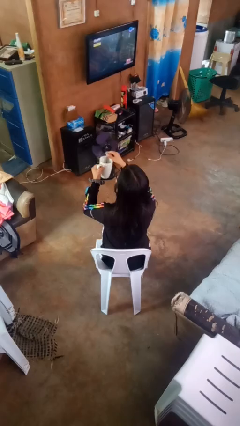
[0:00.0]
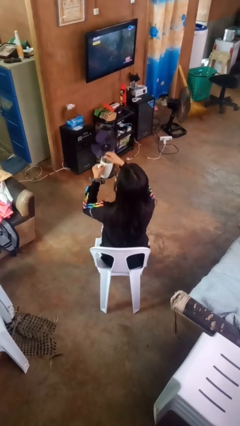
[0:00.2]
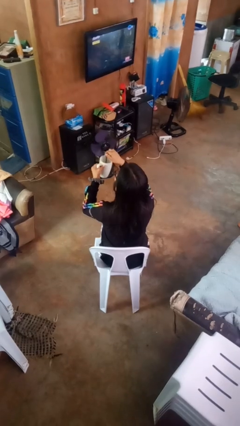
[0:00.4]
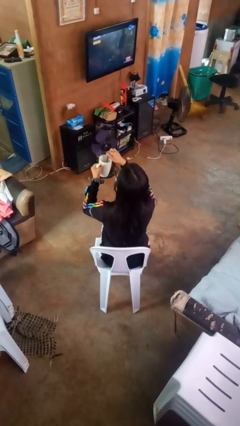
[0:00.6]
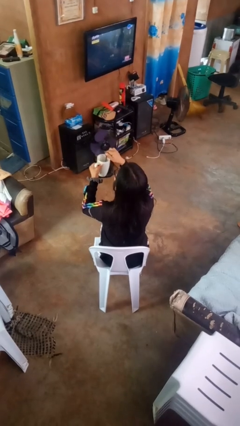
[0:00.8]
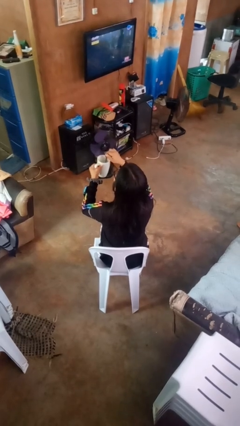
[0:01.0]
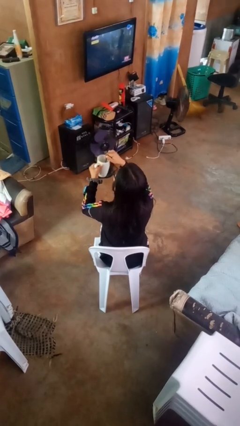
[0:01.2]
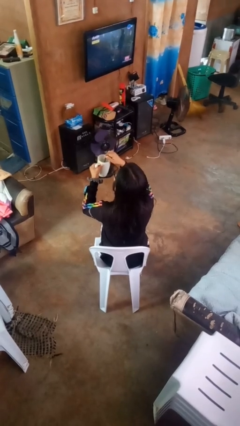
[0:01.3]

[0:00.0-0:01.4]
person stirs mug

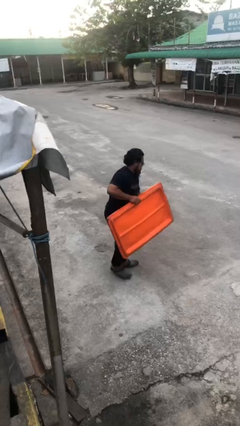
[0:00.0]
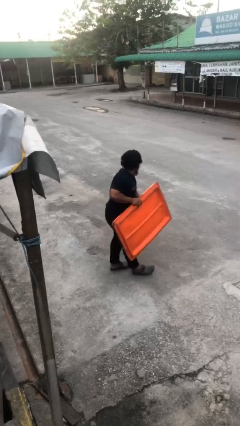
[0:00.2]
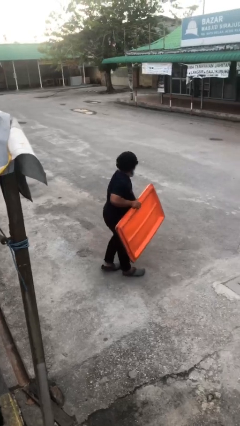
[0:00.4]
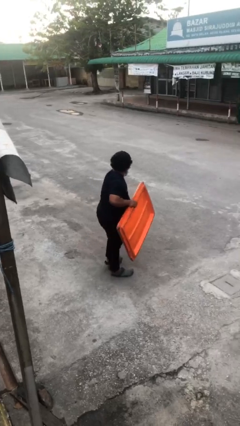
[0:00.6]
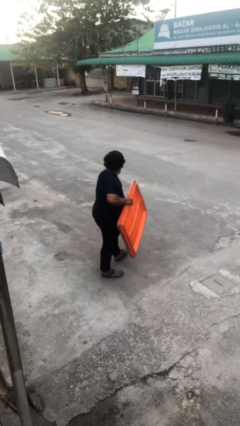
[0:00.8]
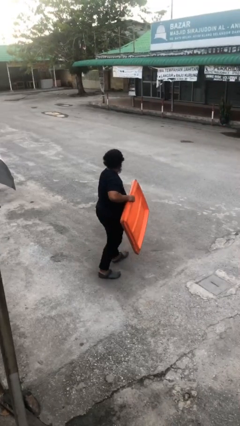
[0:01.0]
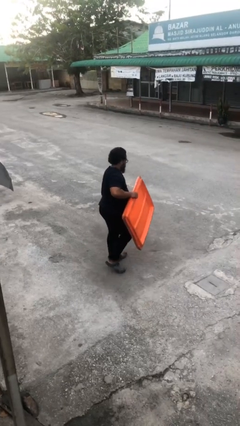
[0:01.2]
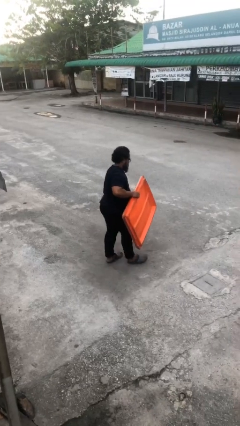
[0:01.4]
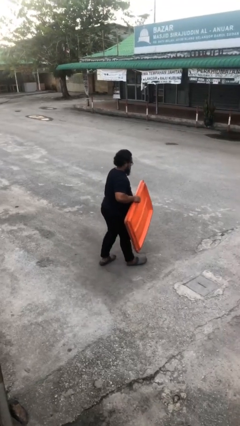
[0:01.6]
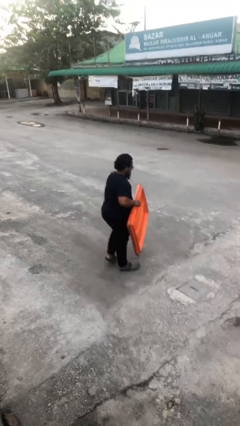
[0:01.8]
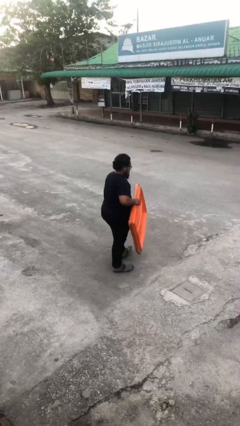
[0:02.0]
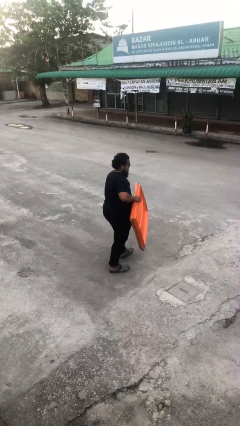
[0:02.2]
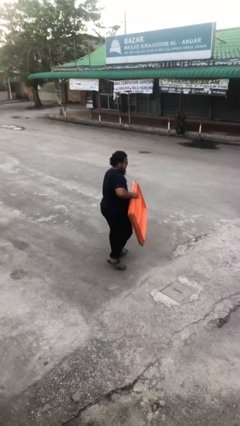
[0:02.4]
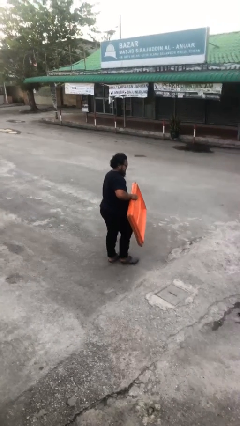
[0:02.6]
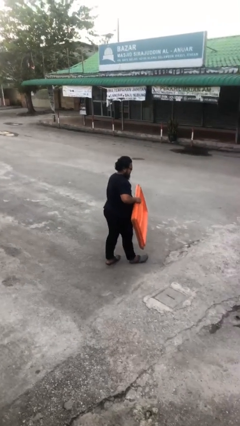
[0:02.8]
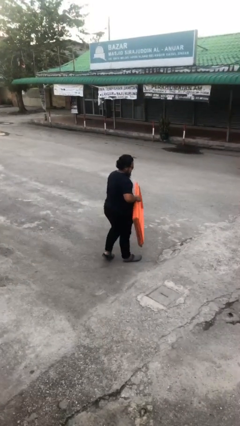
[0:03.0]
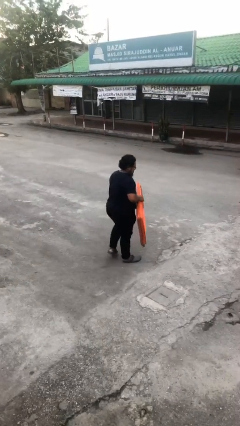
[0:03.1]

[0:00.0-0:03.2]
person carries heavy object

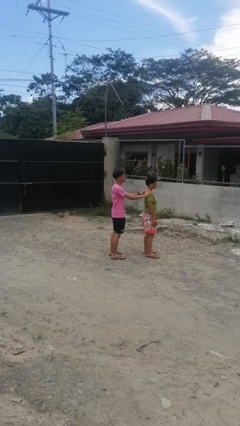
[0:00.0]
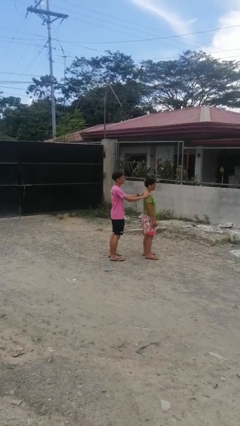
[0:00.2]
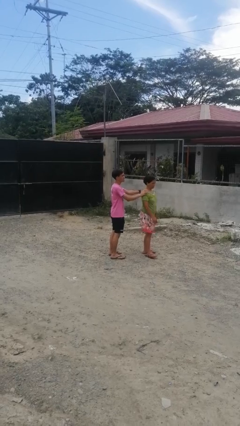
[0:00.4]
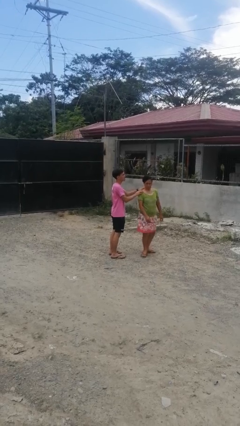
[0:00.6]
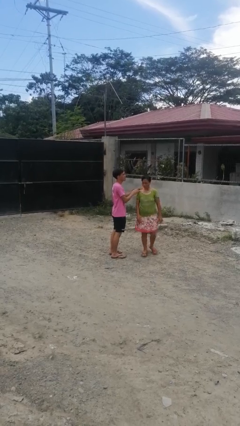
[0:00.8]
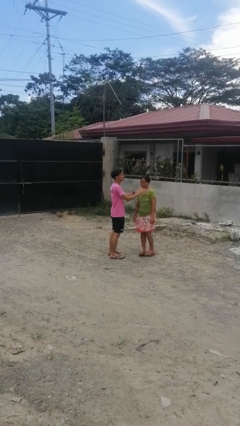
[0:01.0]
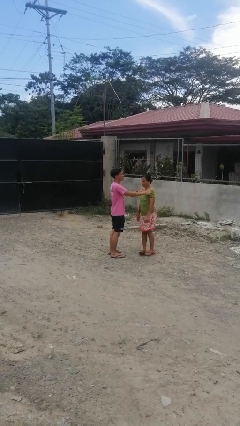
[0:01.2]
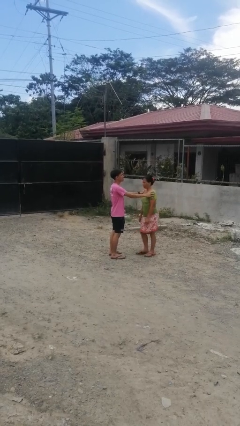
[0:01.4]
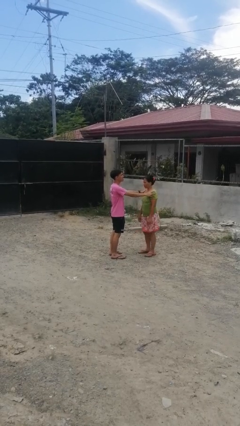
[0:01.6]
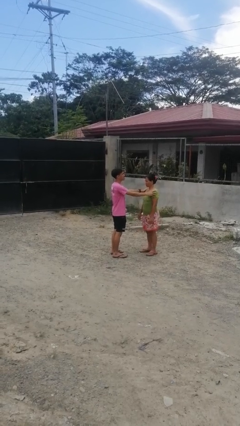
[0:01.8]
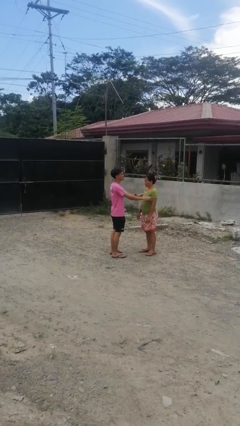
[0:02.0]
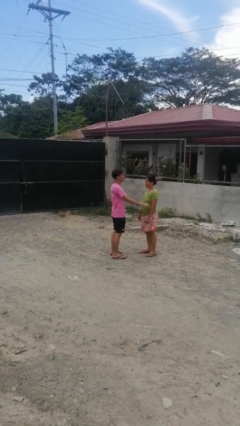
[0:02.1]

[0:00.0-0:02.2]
person spins person around

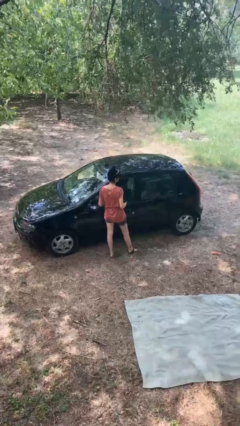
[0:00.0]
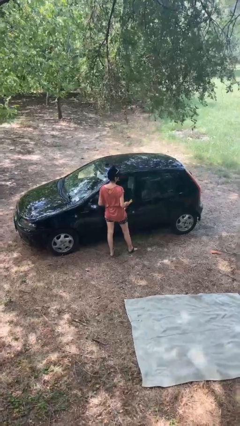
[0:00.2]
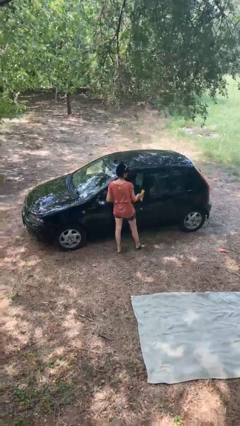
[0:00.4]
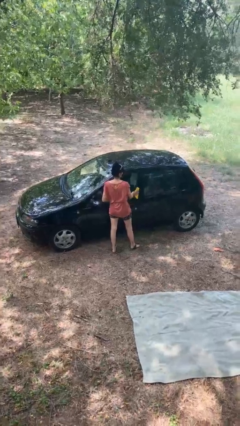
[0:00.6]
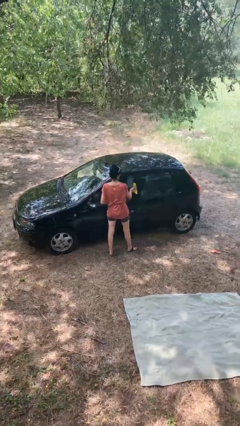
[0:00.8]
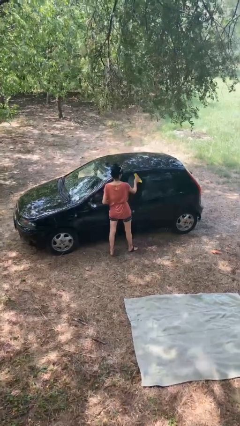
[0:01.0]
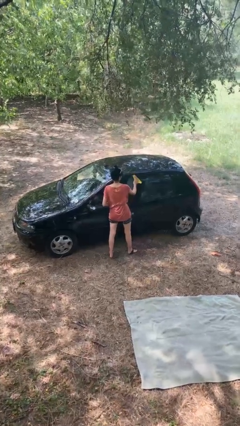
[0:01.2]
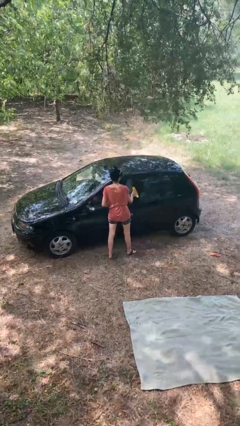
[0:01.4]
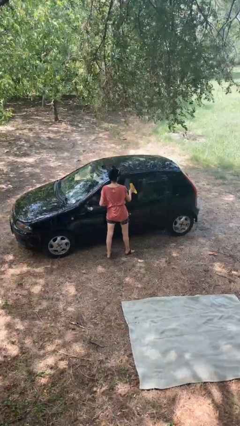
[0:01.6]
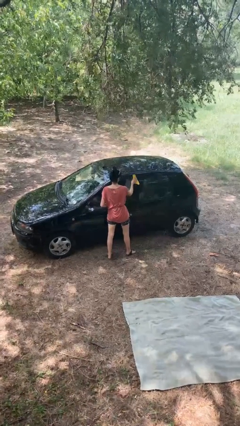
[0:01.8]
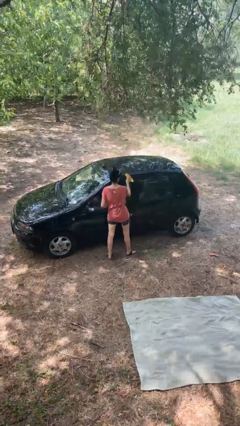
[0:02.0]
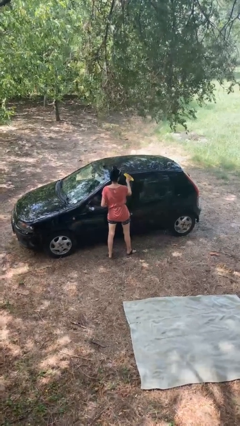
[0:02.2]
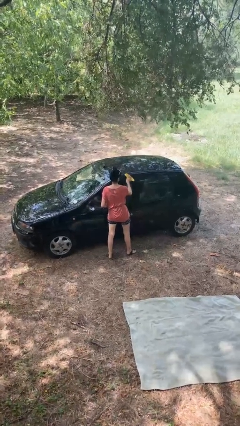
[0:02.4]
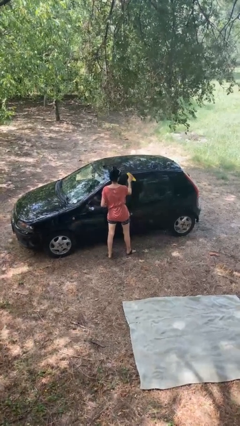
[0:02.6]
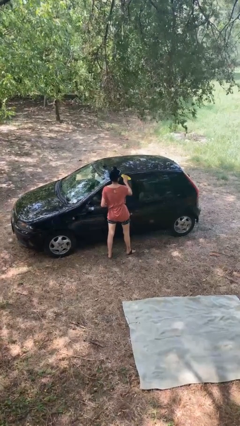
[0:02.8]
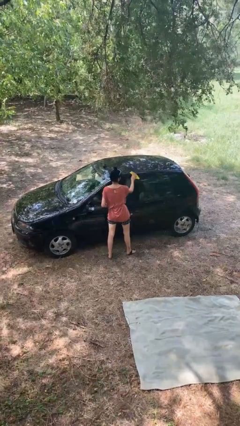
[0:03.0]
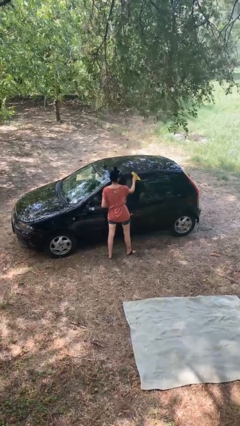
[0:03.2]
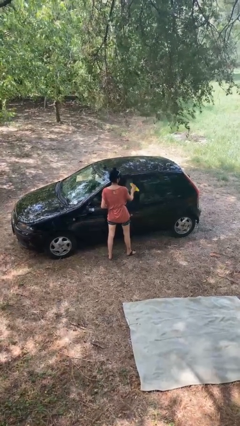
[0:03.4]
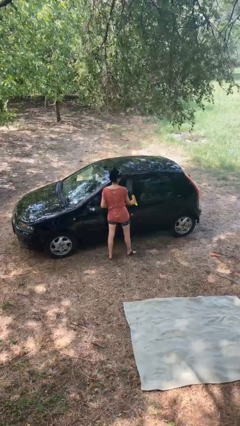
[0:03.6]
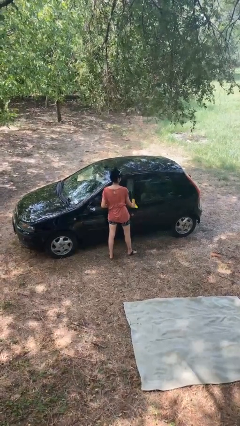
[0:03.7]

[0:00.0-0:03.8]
person polishes car with rag

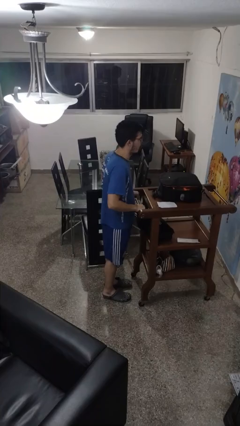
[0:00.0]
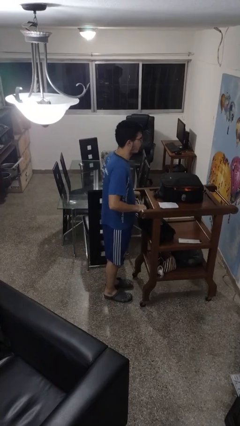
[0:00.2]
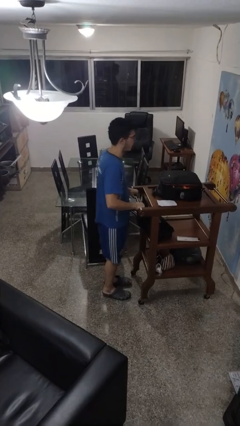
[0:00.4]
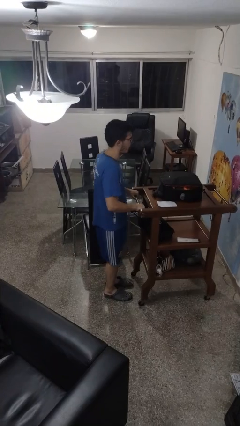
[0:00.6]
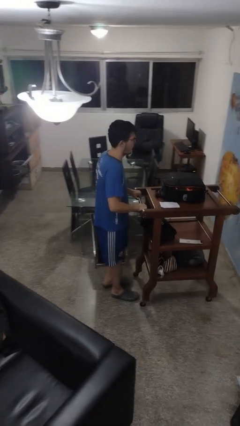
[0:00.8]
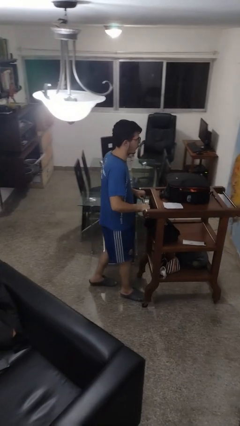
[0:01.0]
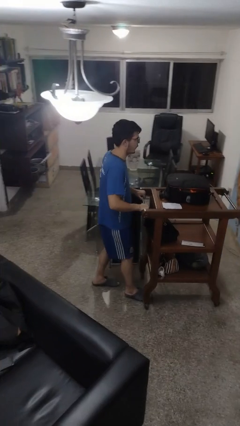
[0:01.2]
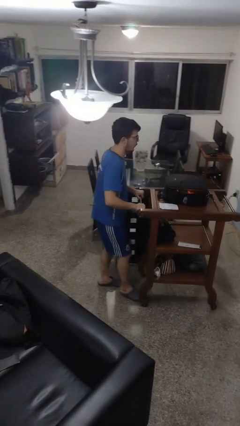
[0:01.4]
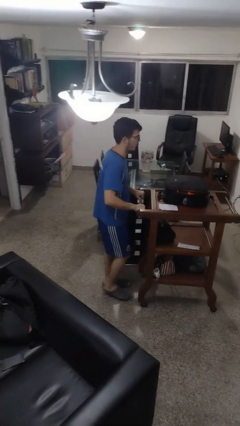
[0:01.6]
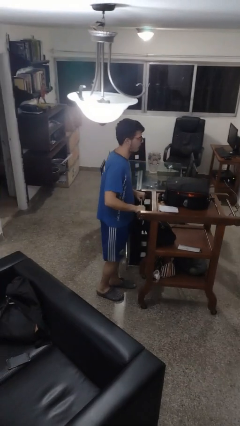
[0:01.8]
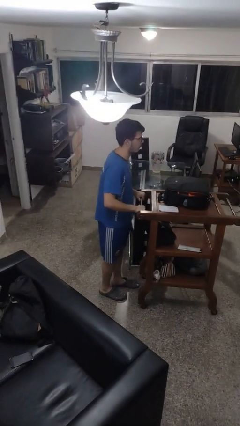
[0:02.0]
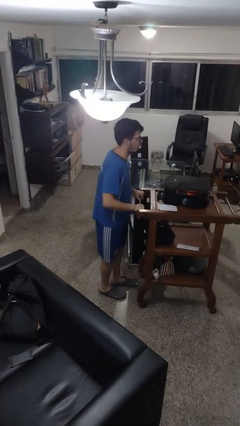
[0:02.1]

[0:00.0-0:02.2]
person pulls wheeled cart

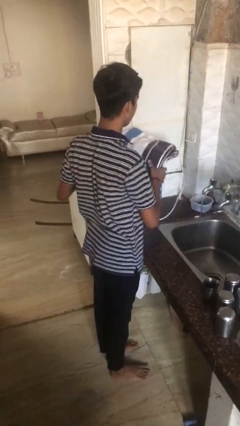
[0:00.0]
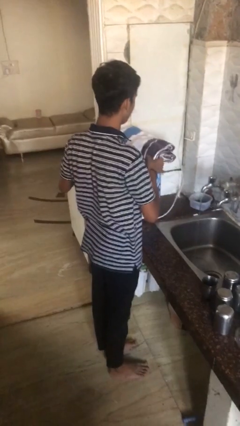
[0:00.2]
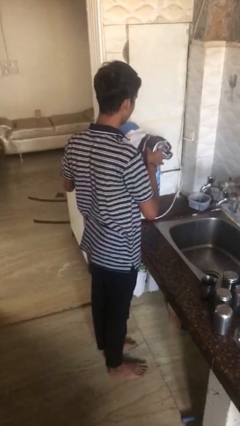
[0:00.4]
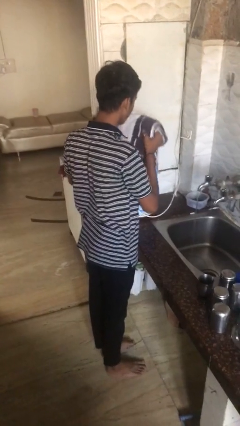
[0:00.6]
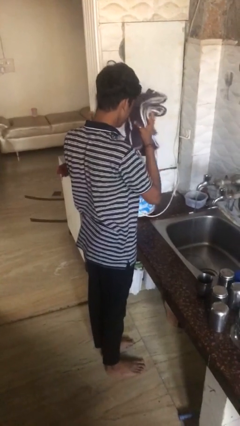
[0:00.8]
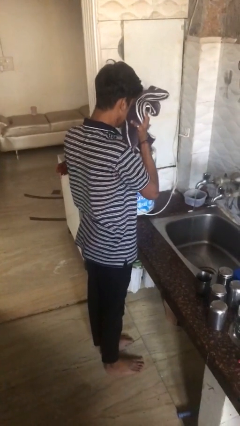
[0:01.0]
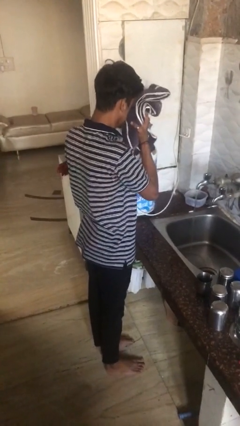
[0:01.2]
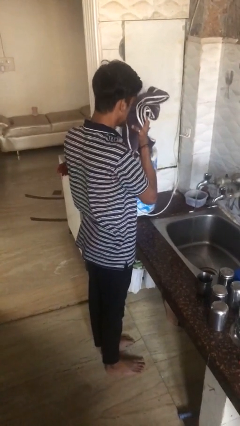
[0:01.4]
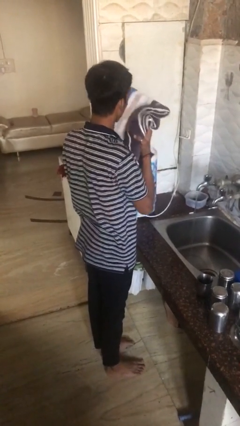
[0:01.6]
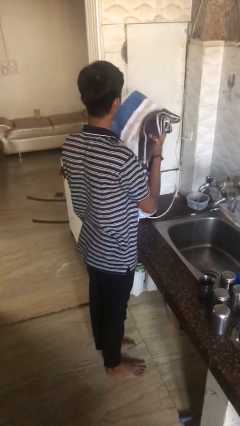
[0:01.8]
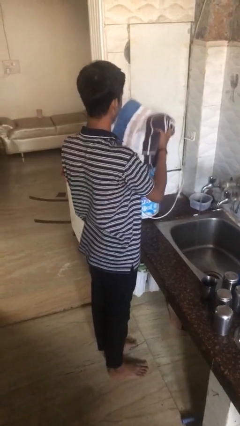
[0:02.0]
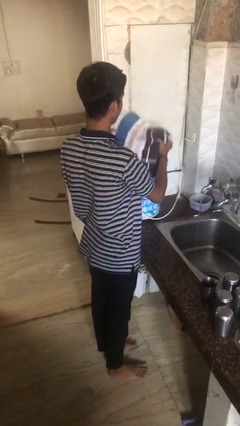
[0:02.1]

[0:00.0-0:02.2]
person dries face with towel

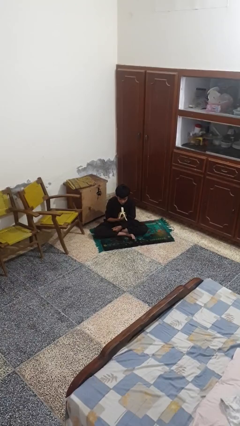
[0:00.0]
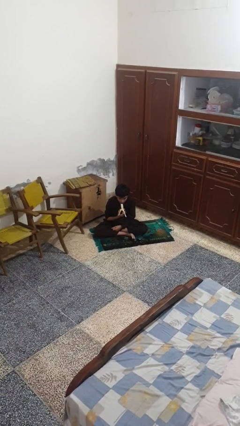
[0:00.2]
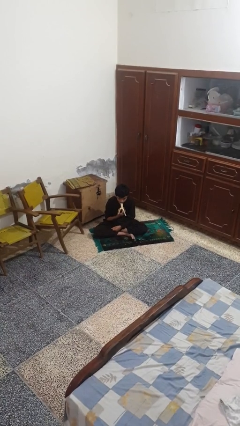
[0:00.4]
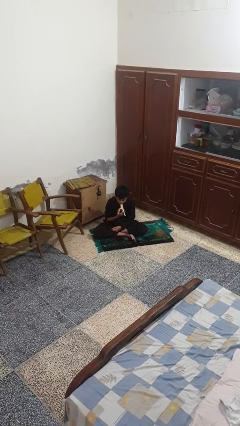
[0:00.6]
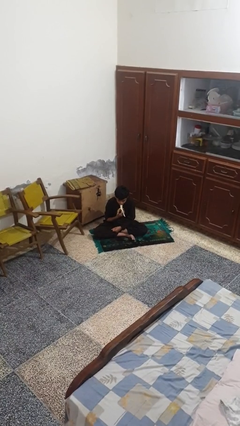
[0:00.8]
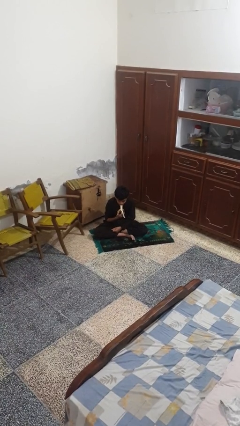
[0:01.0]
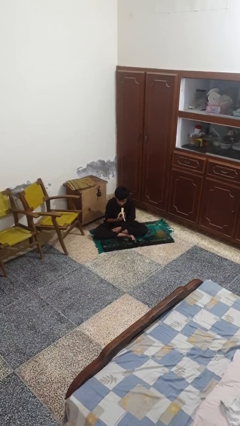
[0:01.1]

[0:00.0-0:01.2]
person eats banana

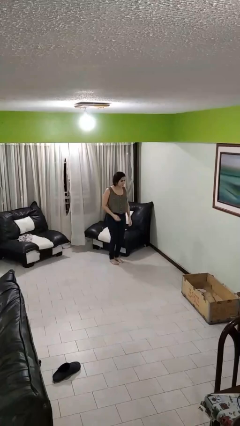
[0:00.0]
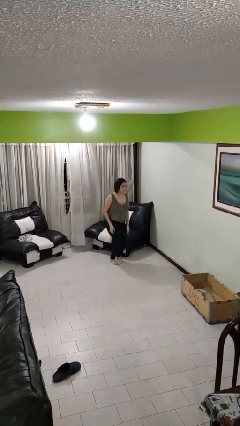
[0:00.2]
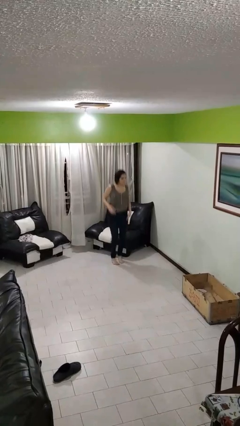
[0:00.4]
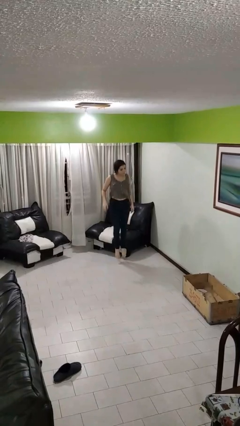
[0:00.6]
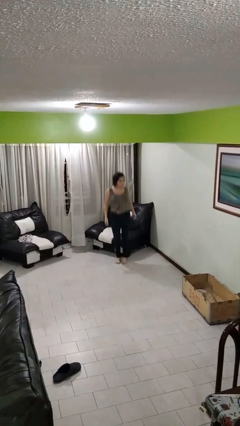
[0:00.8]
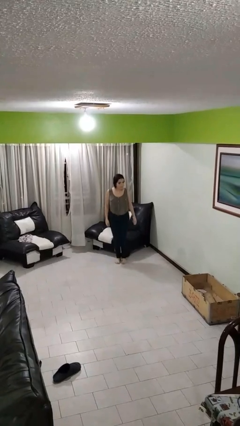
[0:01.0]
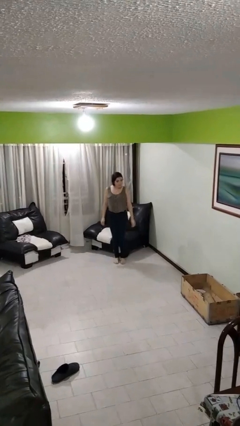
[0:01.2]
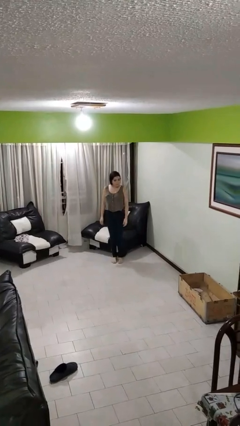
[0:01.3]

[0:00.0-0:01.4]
person jumps
